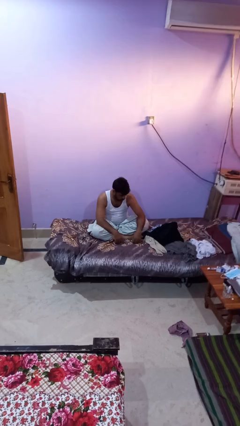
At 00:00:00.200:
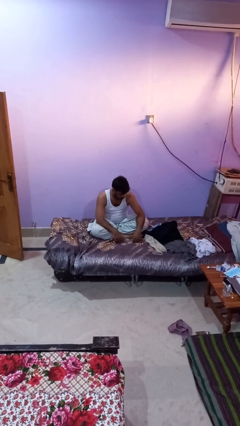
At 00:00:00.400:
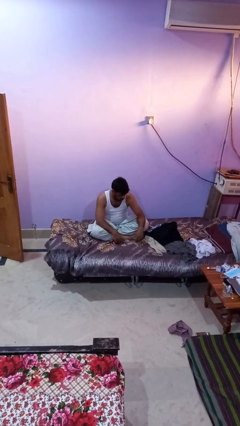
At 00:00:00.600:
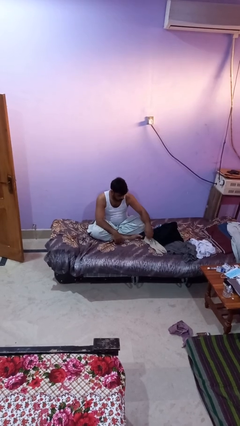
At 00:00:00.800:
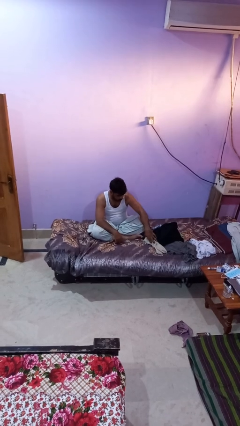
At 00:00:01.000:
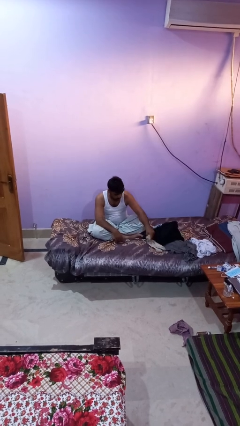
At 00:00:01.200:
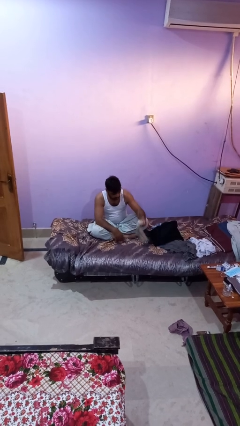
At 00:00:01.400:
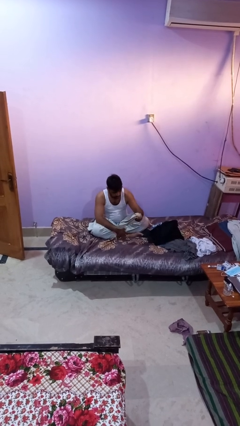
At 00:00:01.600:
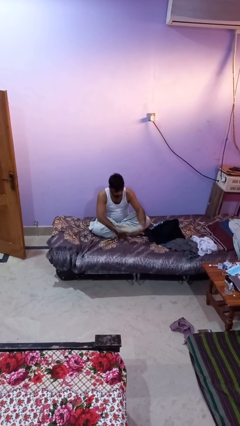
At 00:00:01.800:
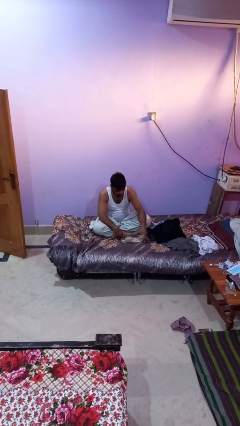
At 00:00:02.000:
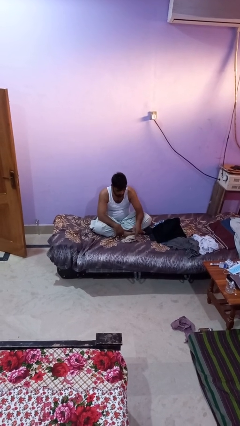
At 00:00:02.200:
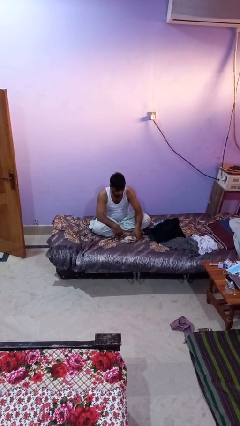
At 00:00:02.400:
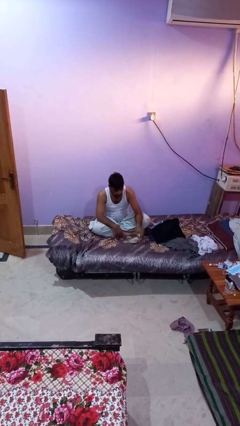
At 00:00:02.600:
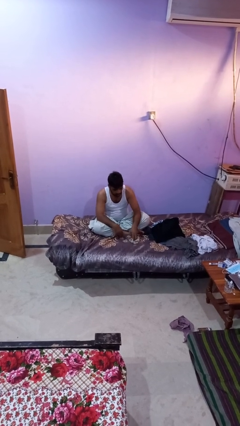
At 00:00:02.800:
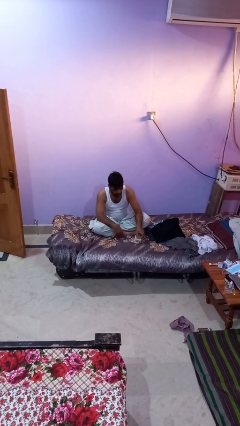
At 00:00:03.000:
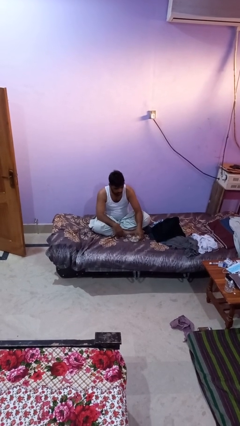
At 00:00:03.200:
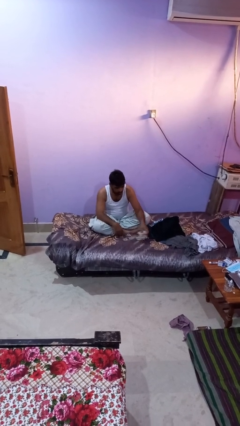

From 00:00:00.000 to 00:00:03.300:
person folds socks

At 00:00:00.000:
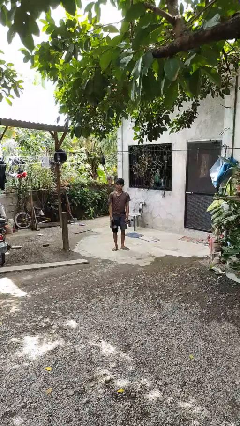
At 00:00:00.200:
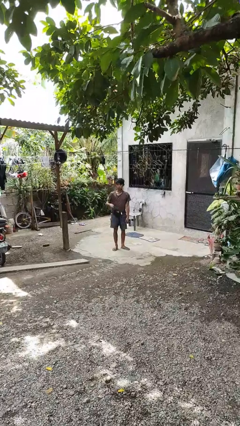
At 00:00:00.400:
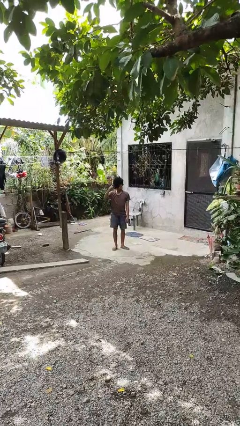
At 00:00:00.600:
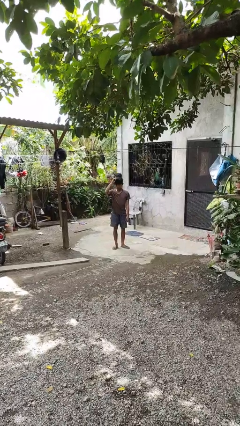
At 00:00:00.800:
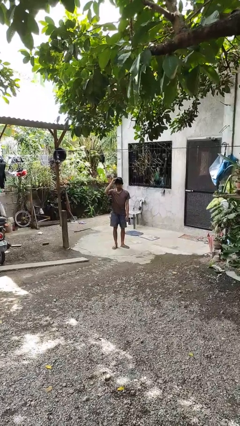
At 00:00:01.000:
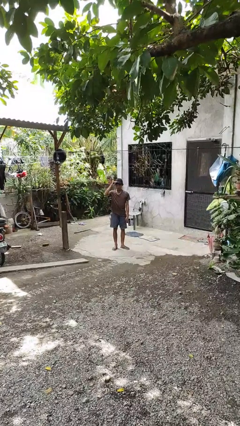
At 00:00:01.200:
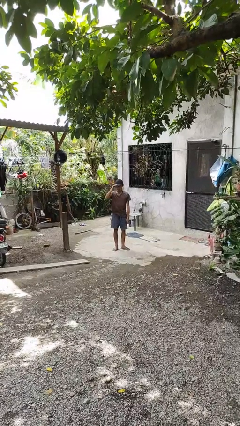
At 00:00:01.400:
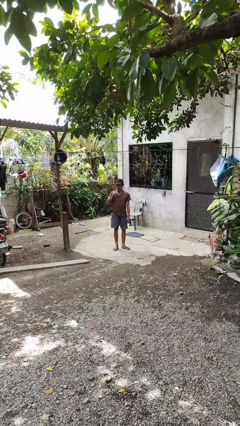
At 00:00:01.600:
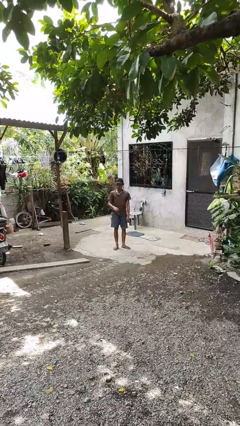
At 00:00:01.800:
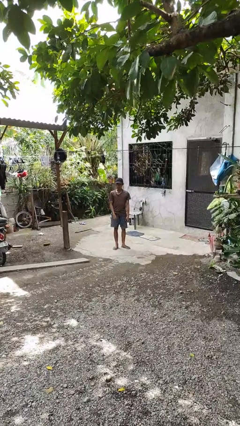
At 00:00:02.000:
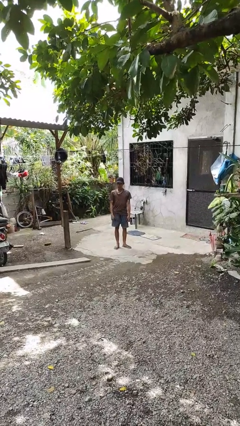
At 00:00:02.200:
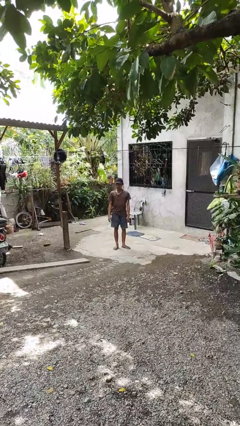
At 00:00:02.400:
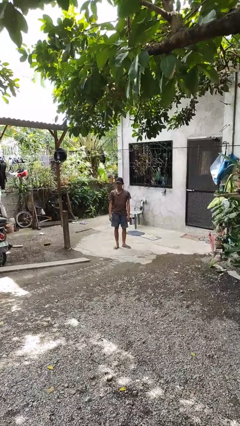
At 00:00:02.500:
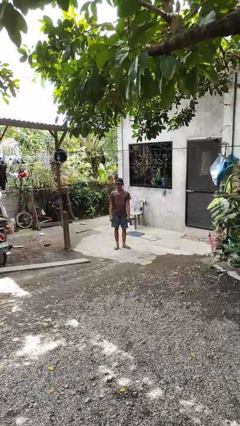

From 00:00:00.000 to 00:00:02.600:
person puts on hat

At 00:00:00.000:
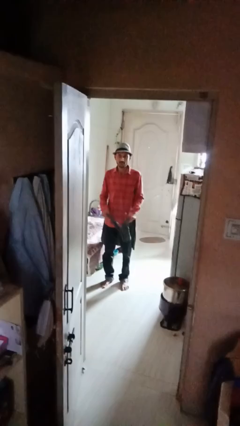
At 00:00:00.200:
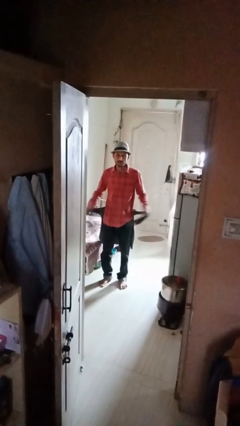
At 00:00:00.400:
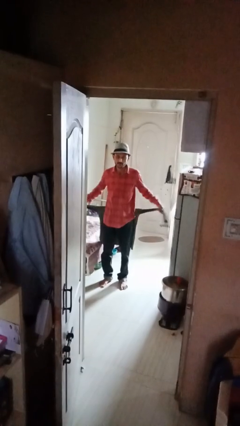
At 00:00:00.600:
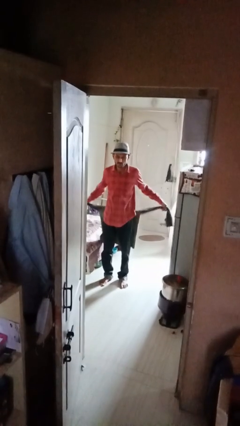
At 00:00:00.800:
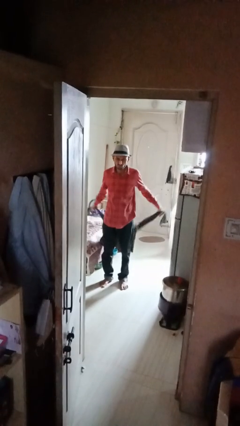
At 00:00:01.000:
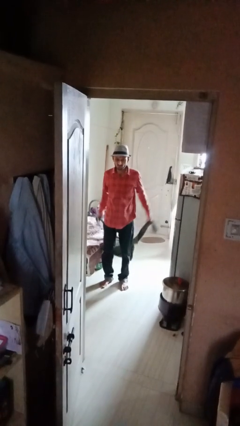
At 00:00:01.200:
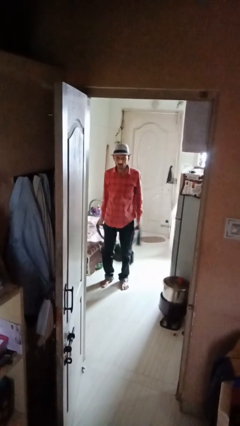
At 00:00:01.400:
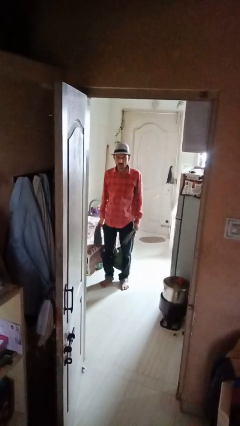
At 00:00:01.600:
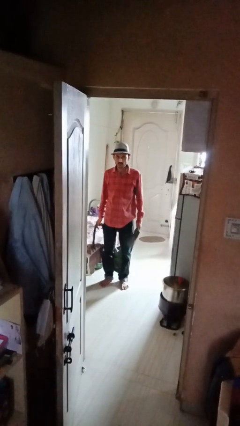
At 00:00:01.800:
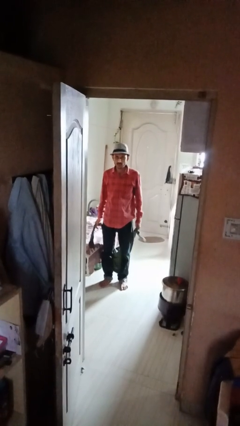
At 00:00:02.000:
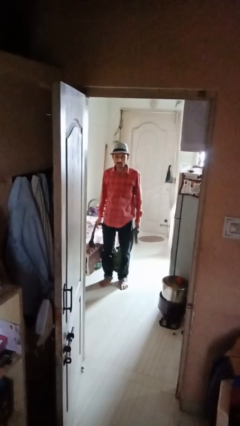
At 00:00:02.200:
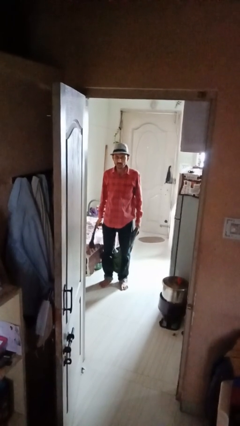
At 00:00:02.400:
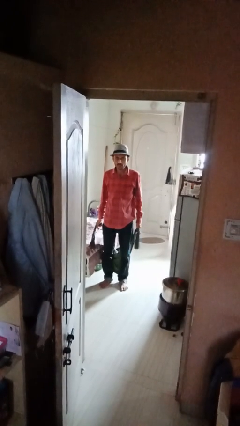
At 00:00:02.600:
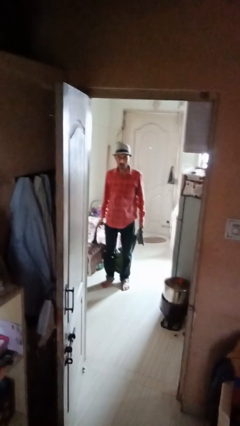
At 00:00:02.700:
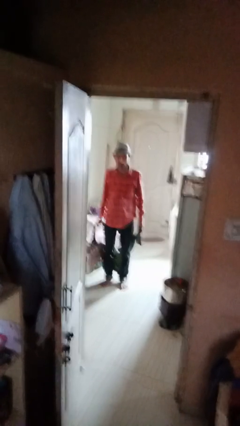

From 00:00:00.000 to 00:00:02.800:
person unties jacket around waist

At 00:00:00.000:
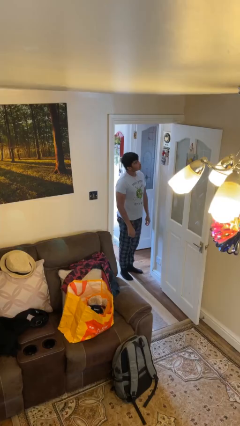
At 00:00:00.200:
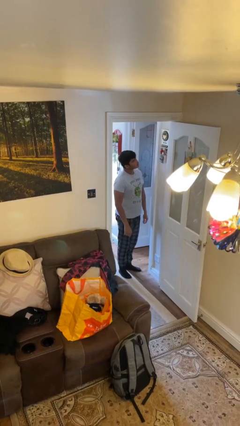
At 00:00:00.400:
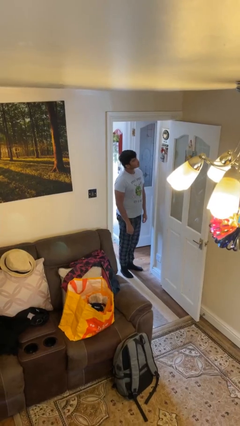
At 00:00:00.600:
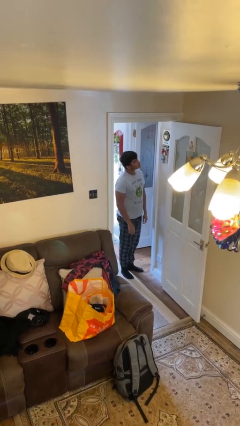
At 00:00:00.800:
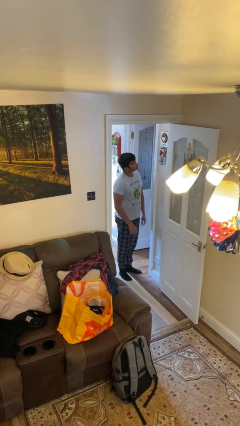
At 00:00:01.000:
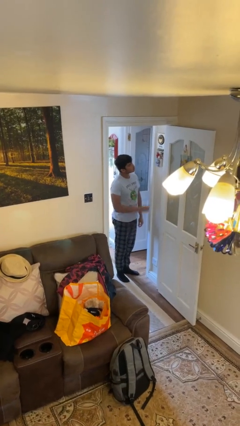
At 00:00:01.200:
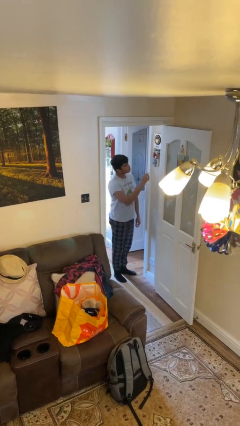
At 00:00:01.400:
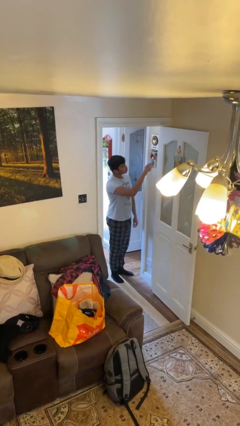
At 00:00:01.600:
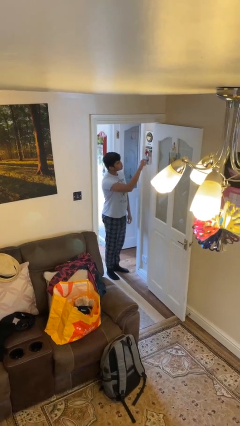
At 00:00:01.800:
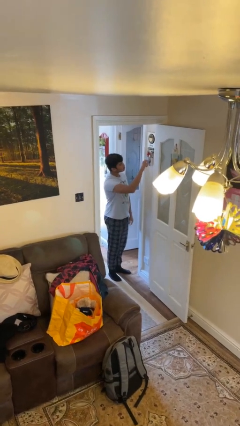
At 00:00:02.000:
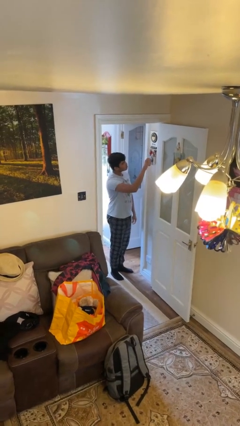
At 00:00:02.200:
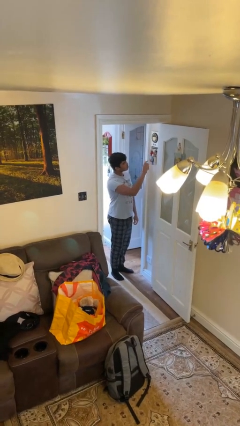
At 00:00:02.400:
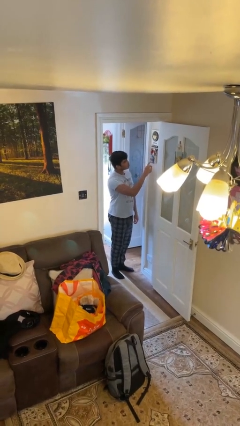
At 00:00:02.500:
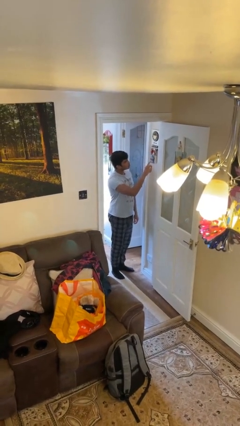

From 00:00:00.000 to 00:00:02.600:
person adjusts thermostat

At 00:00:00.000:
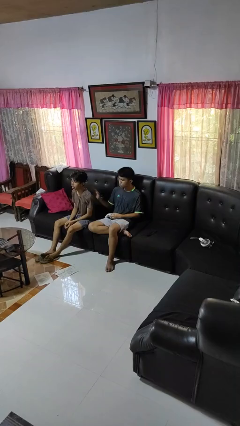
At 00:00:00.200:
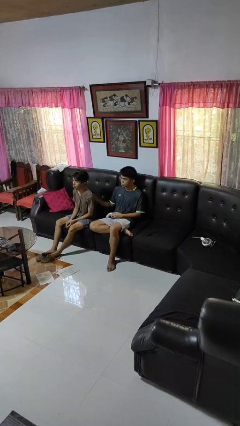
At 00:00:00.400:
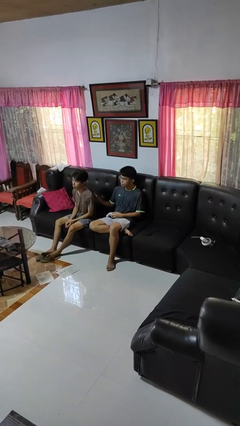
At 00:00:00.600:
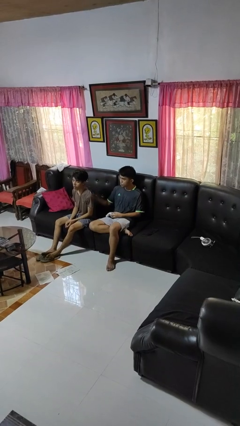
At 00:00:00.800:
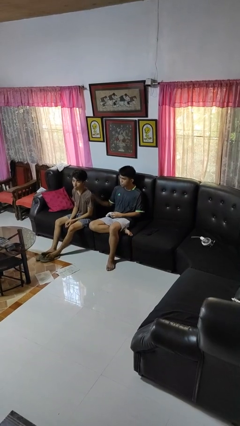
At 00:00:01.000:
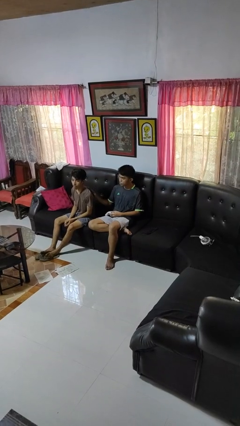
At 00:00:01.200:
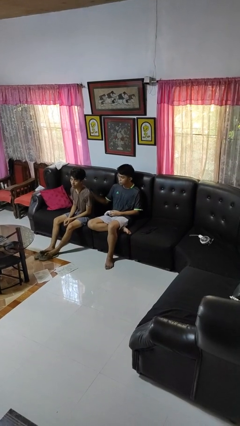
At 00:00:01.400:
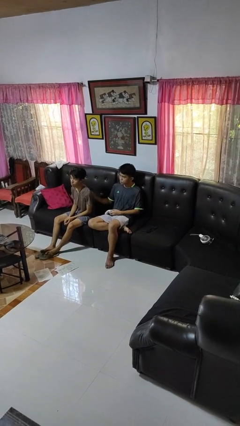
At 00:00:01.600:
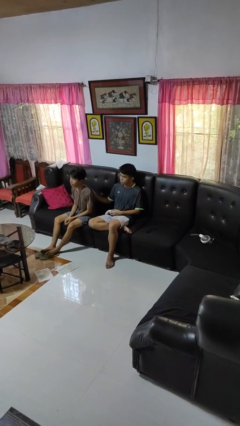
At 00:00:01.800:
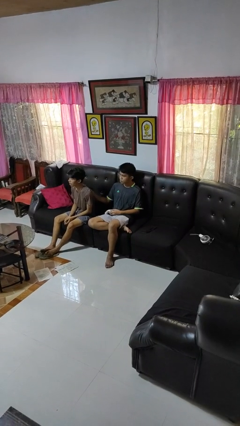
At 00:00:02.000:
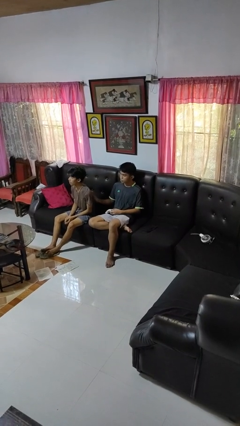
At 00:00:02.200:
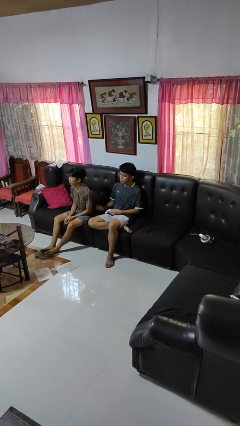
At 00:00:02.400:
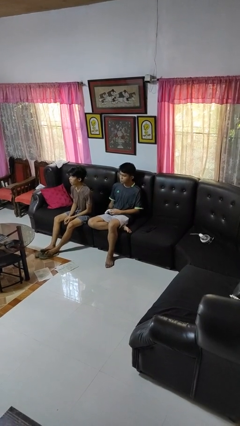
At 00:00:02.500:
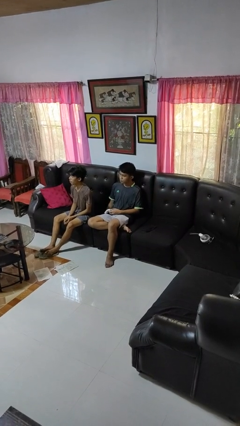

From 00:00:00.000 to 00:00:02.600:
person touches back of person

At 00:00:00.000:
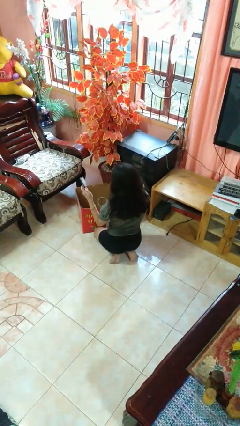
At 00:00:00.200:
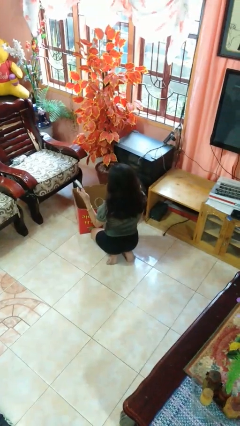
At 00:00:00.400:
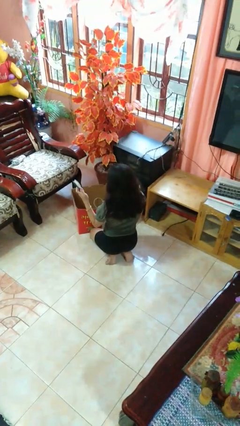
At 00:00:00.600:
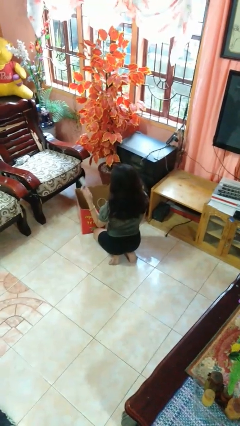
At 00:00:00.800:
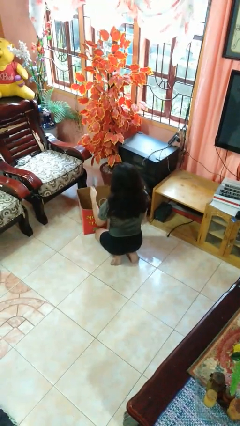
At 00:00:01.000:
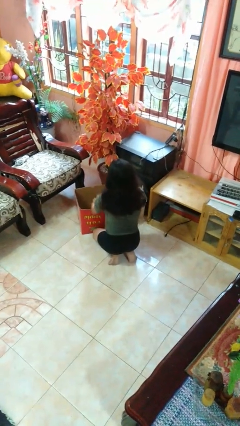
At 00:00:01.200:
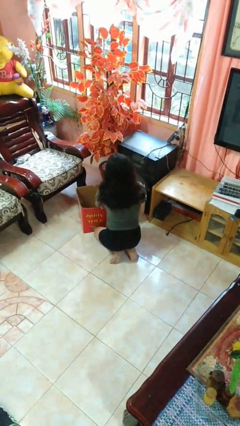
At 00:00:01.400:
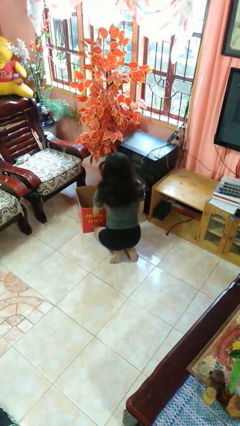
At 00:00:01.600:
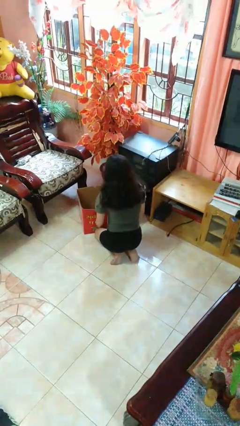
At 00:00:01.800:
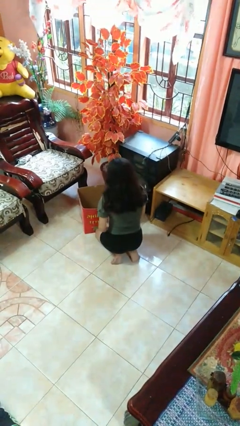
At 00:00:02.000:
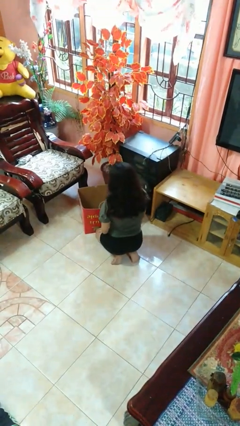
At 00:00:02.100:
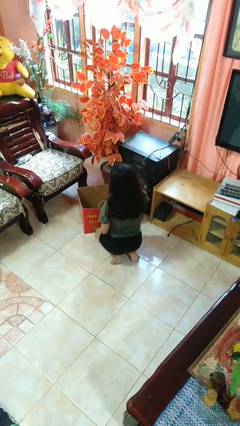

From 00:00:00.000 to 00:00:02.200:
person puts object into box

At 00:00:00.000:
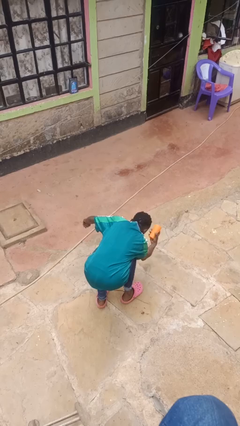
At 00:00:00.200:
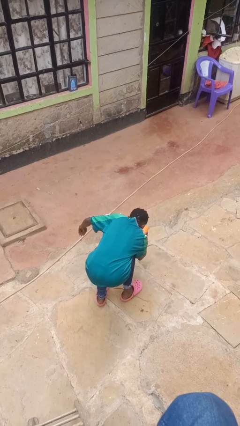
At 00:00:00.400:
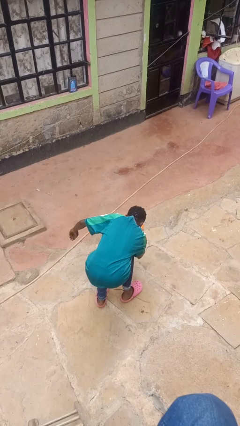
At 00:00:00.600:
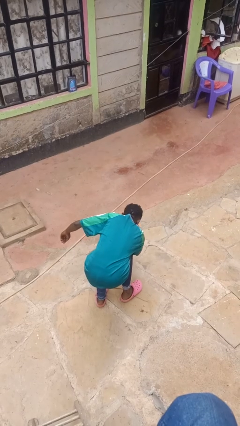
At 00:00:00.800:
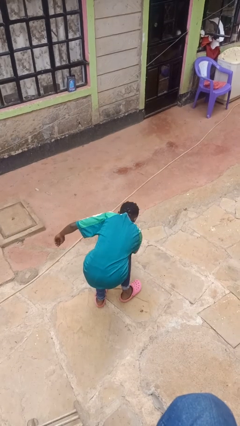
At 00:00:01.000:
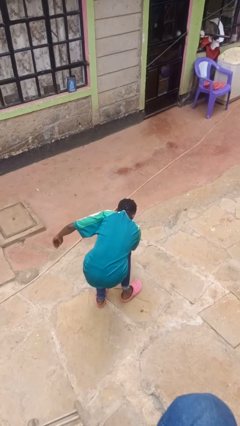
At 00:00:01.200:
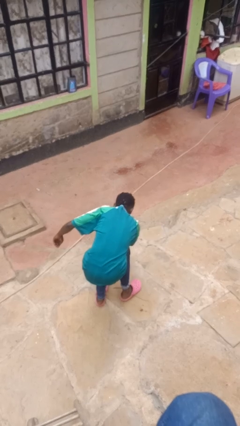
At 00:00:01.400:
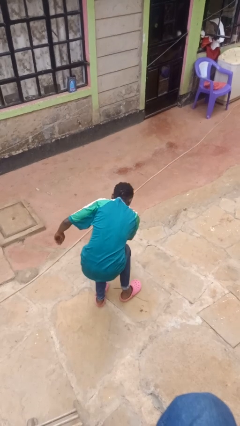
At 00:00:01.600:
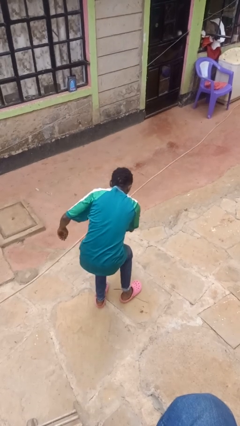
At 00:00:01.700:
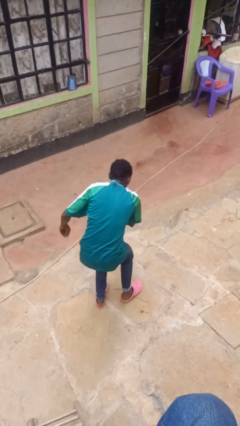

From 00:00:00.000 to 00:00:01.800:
person catches dropped object